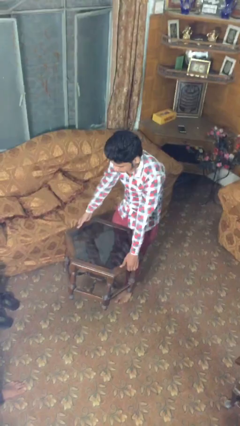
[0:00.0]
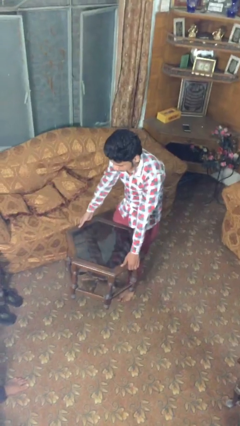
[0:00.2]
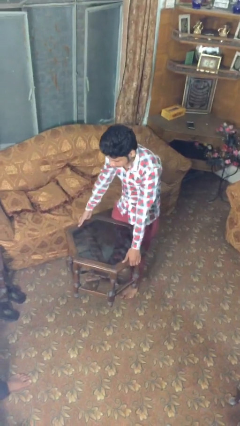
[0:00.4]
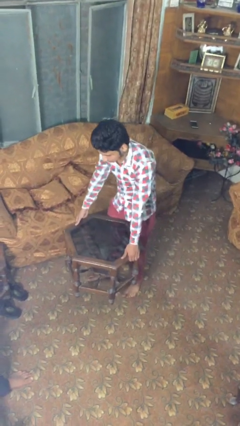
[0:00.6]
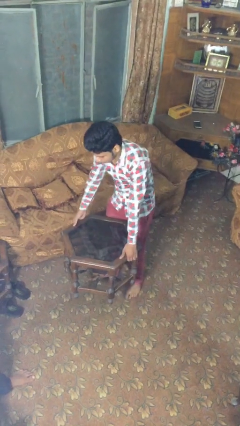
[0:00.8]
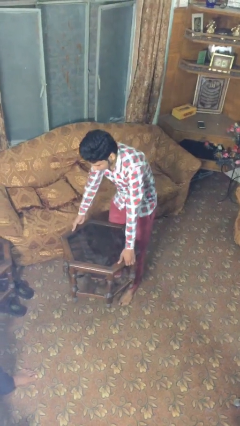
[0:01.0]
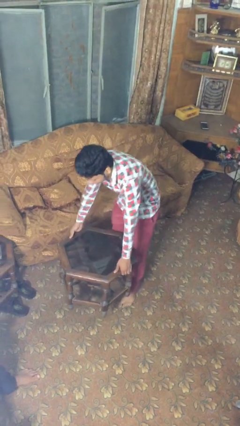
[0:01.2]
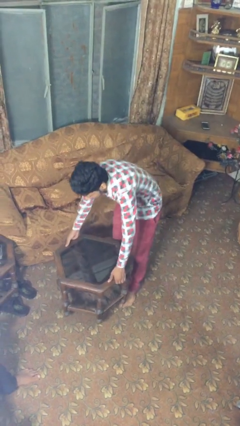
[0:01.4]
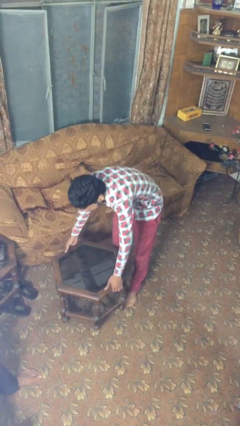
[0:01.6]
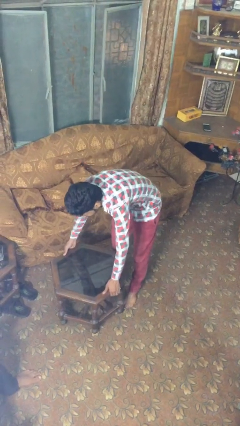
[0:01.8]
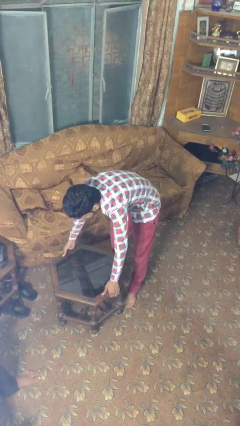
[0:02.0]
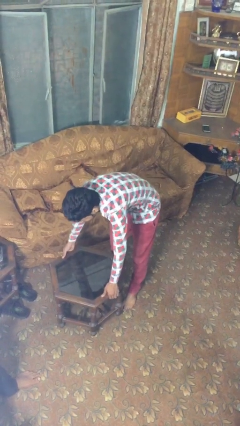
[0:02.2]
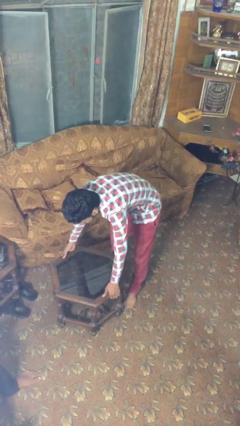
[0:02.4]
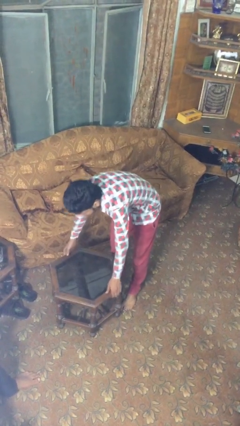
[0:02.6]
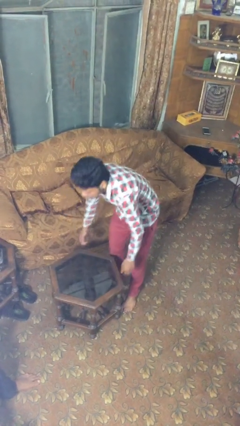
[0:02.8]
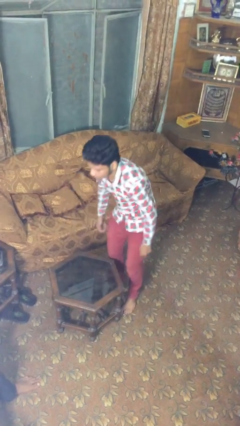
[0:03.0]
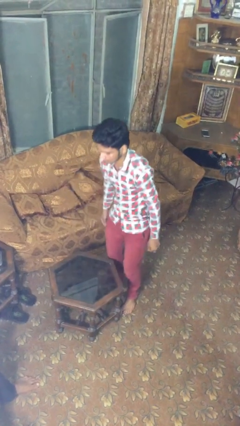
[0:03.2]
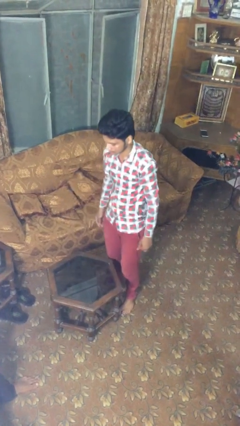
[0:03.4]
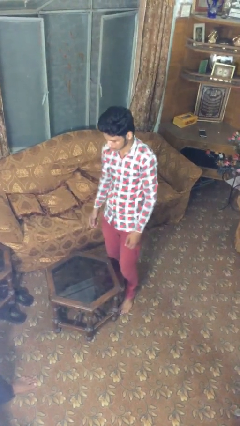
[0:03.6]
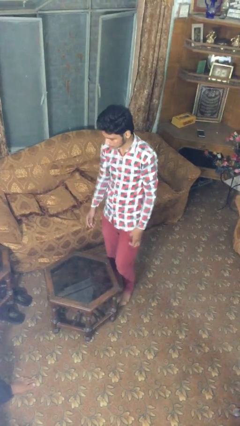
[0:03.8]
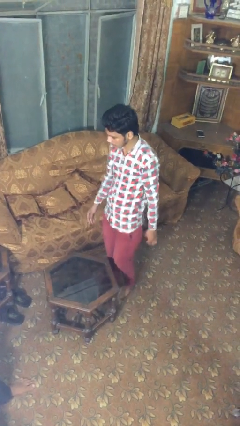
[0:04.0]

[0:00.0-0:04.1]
person puts down object on floor

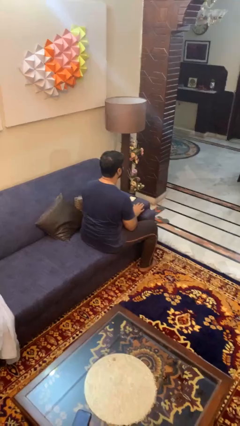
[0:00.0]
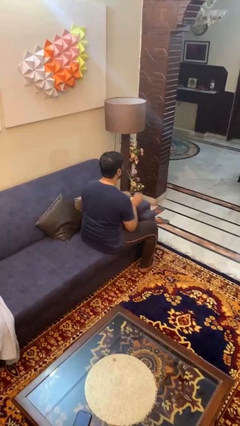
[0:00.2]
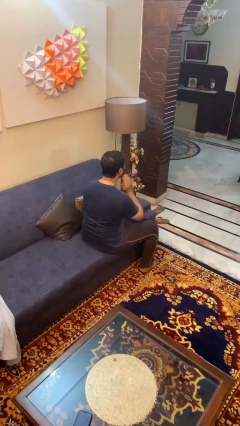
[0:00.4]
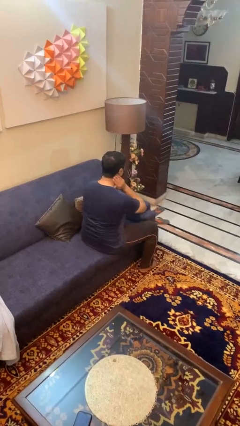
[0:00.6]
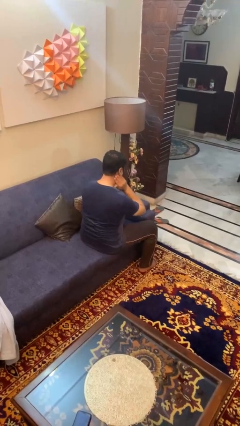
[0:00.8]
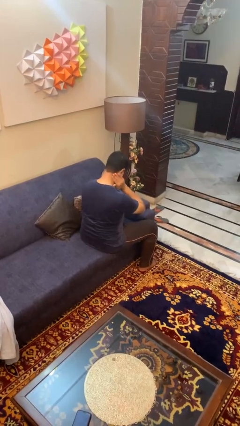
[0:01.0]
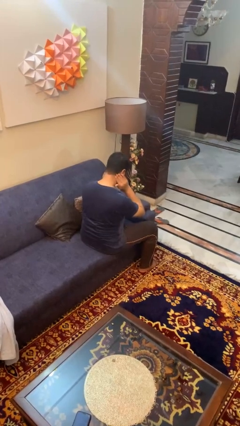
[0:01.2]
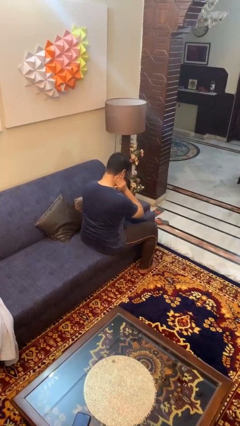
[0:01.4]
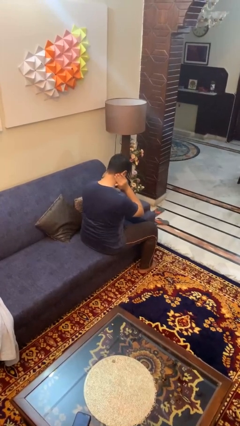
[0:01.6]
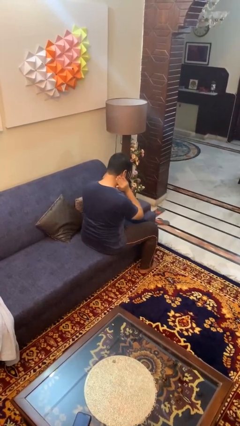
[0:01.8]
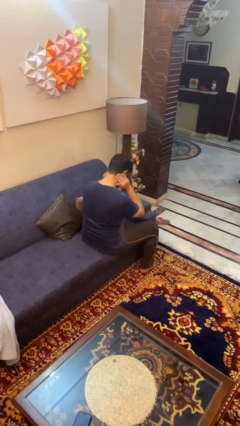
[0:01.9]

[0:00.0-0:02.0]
person rubs neck

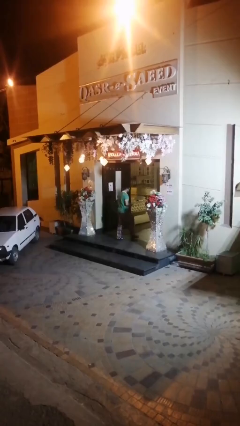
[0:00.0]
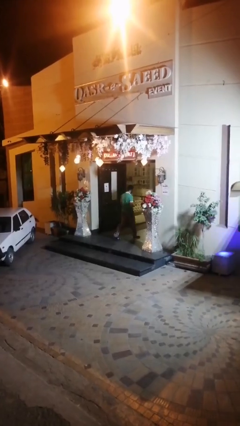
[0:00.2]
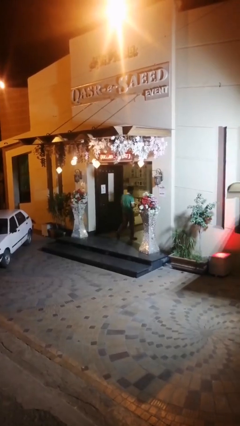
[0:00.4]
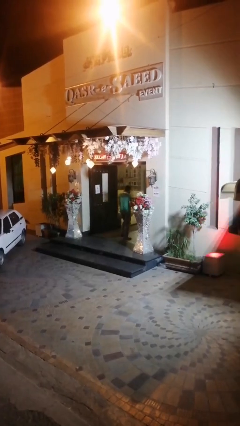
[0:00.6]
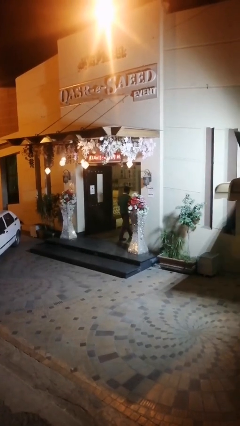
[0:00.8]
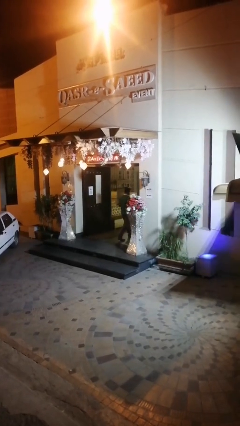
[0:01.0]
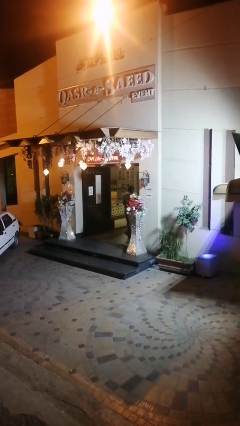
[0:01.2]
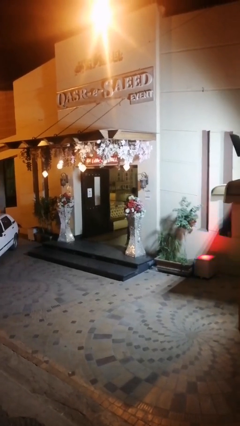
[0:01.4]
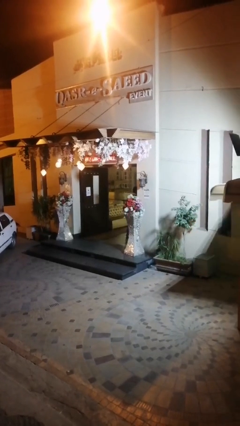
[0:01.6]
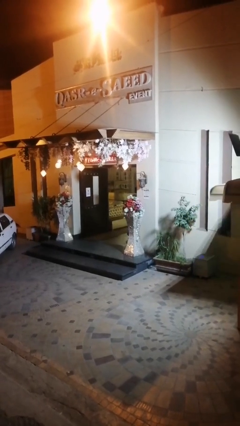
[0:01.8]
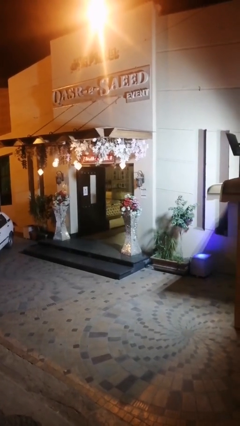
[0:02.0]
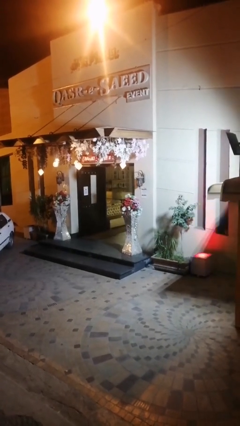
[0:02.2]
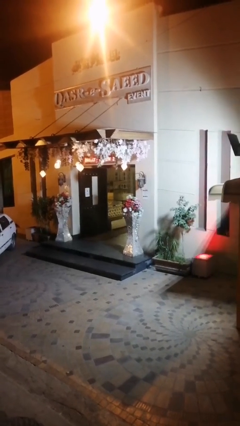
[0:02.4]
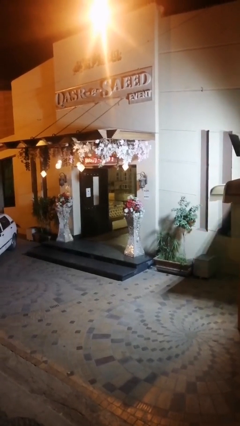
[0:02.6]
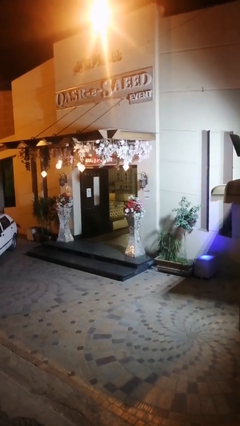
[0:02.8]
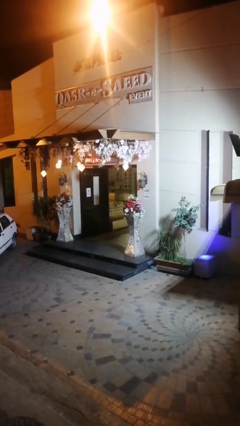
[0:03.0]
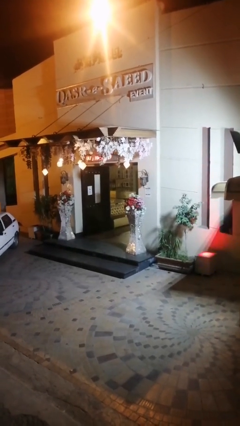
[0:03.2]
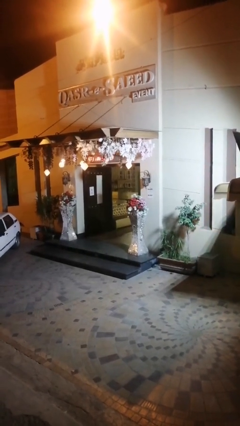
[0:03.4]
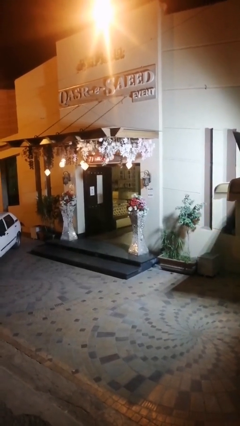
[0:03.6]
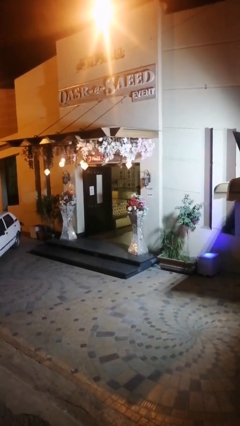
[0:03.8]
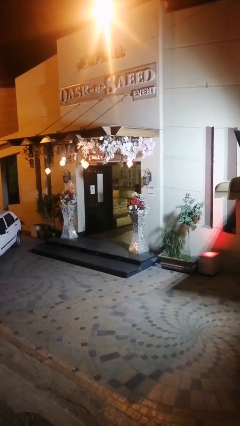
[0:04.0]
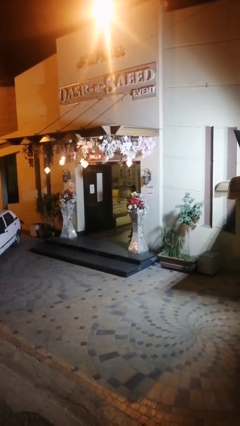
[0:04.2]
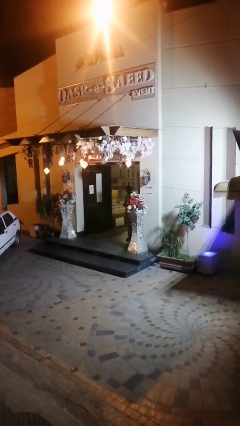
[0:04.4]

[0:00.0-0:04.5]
person exits scene through structure

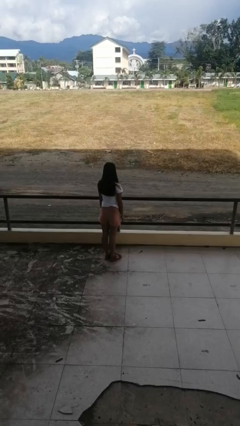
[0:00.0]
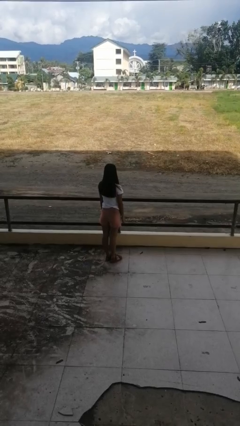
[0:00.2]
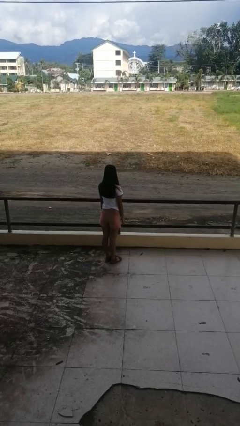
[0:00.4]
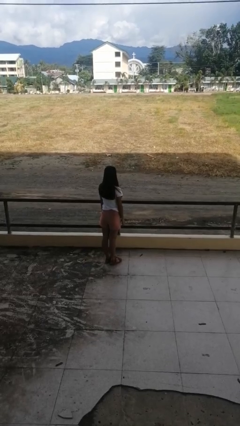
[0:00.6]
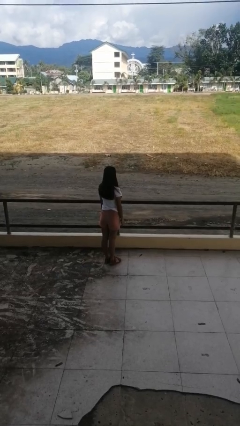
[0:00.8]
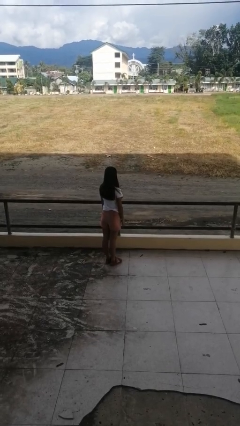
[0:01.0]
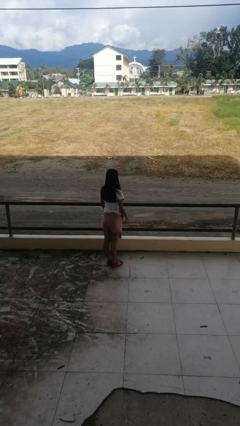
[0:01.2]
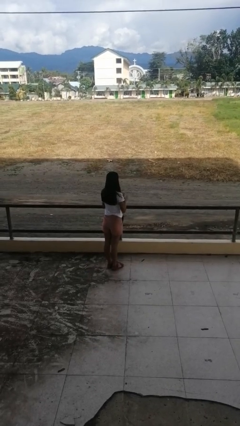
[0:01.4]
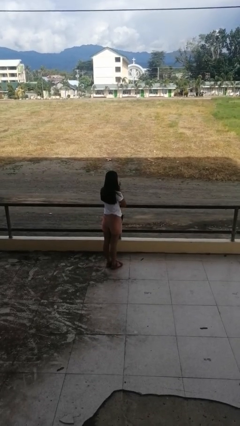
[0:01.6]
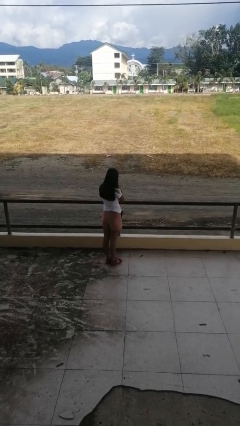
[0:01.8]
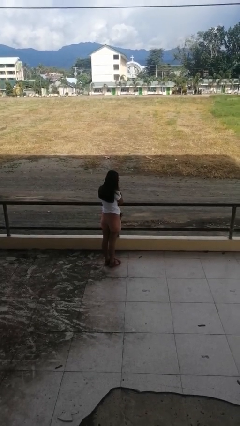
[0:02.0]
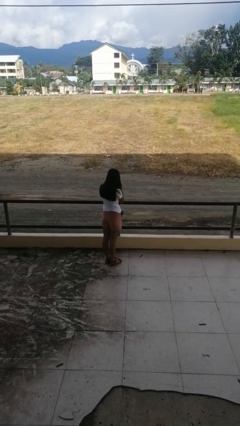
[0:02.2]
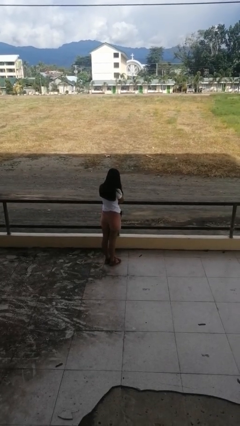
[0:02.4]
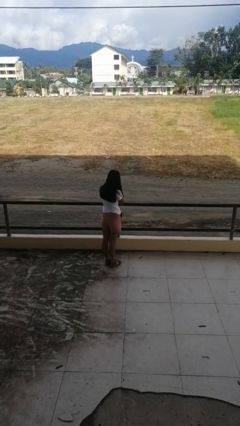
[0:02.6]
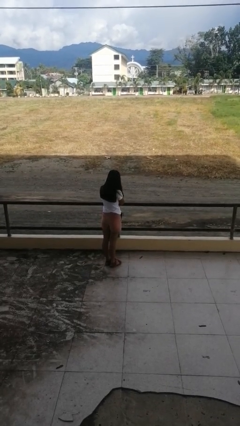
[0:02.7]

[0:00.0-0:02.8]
person sneezes into hand

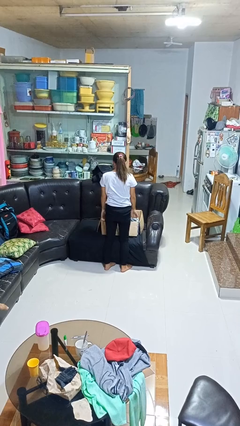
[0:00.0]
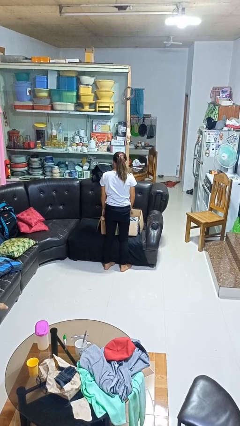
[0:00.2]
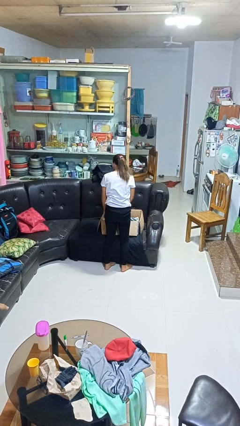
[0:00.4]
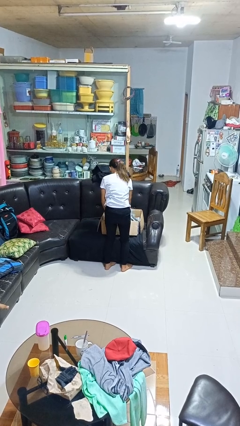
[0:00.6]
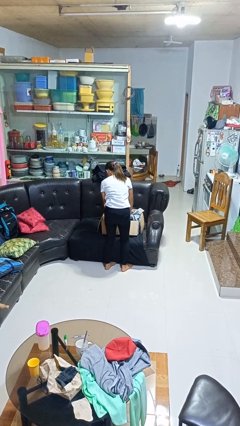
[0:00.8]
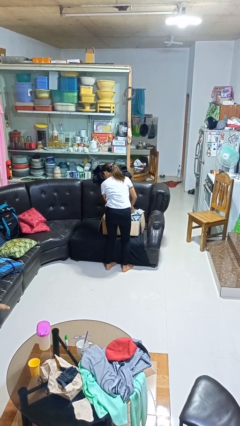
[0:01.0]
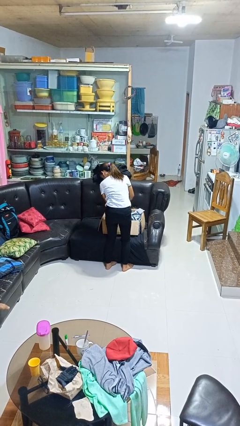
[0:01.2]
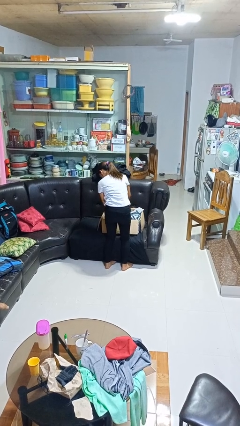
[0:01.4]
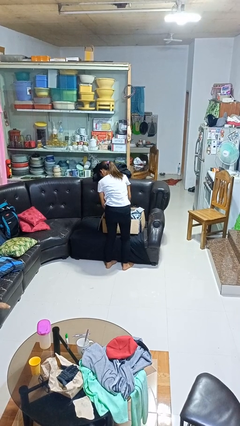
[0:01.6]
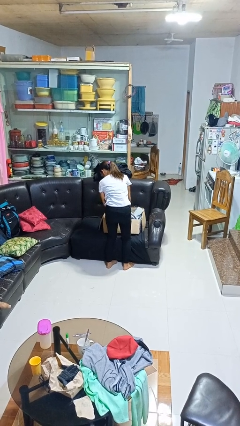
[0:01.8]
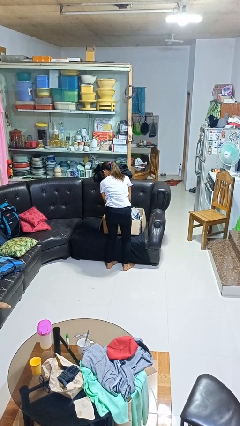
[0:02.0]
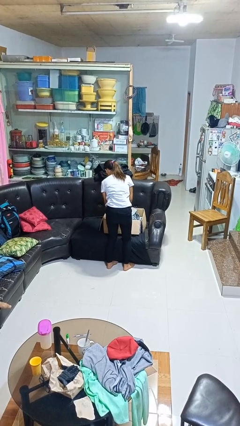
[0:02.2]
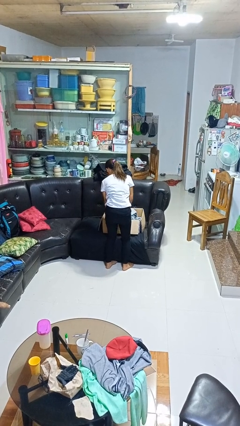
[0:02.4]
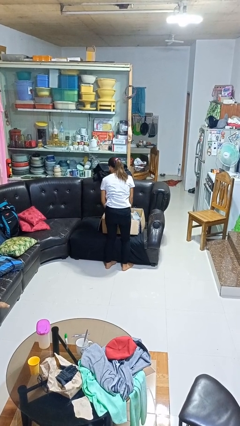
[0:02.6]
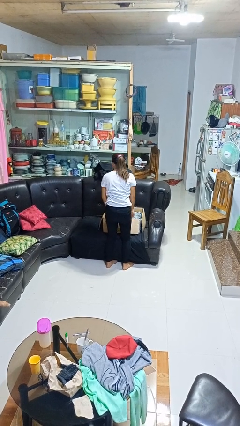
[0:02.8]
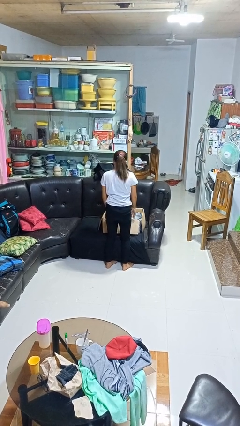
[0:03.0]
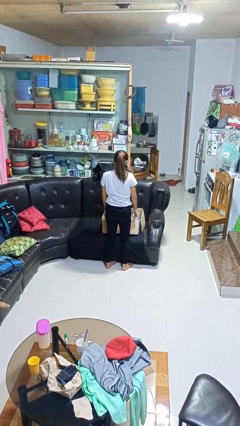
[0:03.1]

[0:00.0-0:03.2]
person searches in box

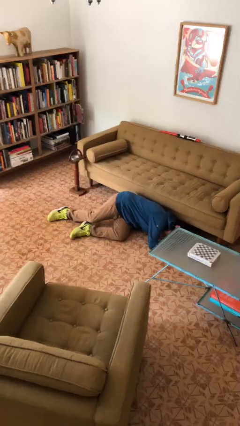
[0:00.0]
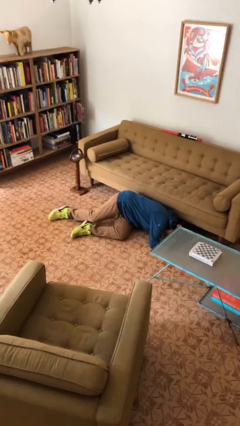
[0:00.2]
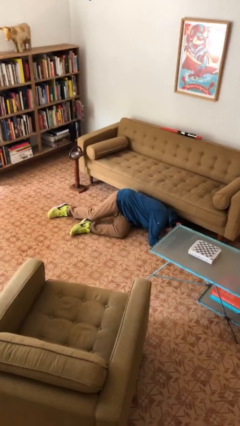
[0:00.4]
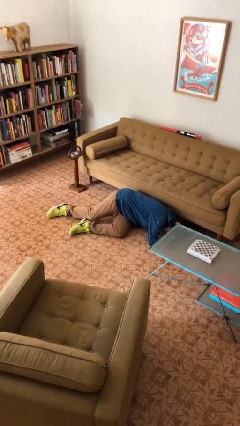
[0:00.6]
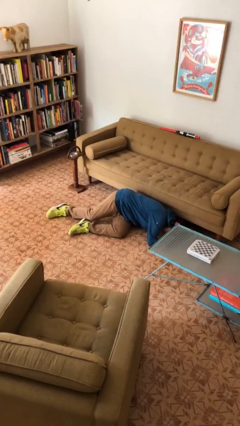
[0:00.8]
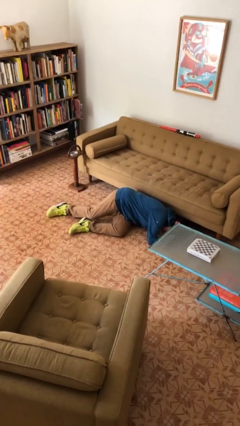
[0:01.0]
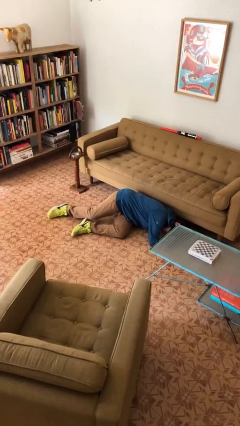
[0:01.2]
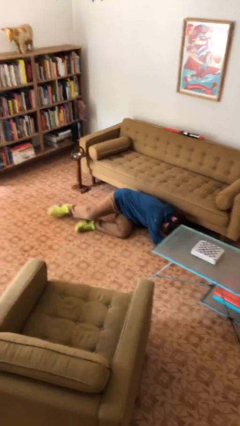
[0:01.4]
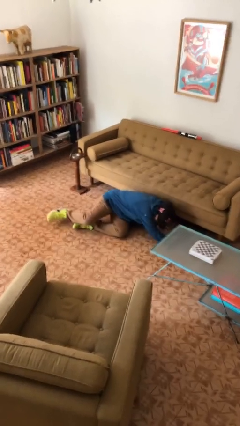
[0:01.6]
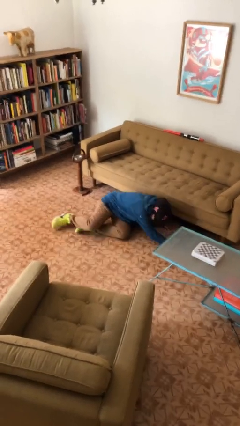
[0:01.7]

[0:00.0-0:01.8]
person lies down on floor
